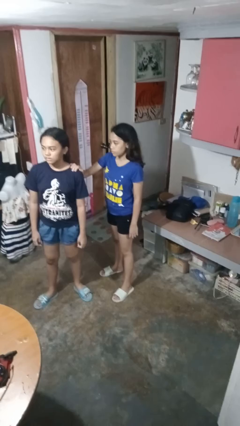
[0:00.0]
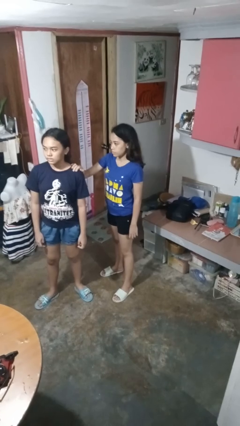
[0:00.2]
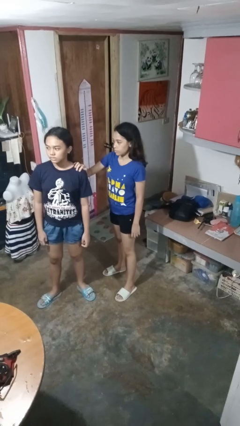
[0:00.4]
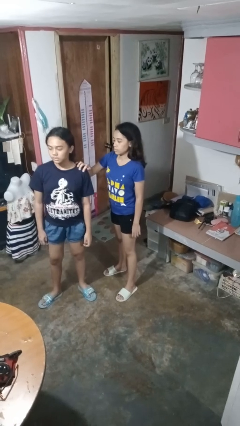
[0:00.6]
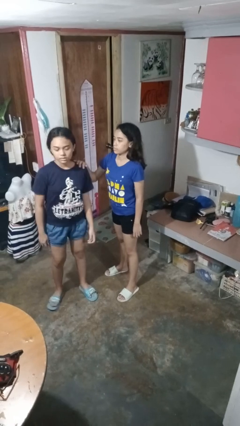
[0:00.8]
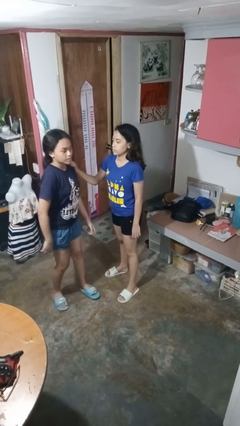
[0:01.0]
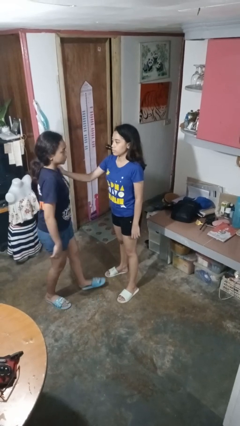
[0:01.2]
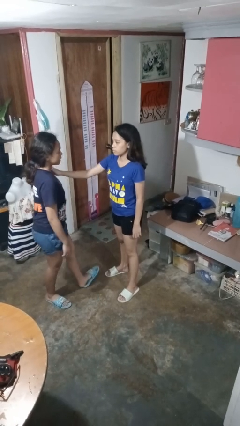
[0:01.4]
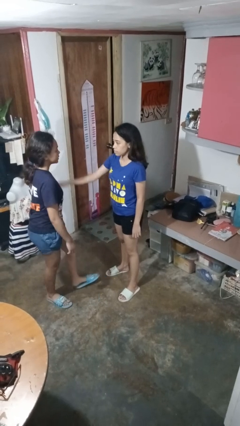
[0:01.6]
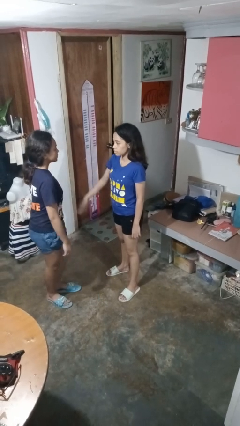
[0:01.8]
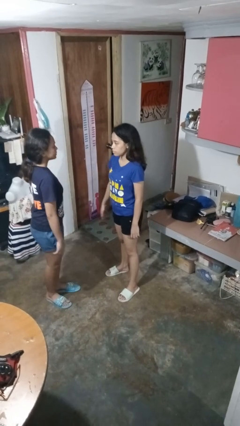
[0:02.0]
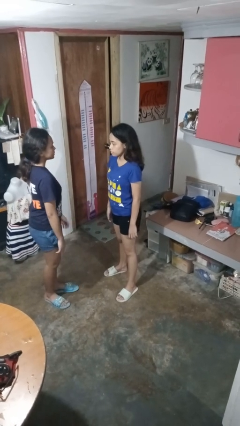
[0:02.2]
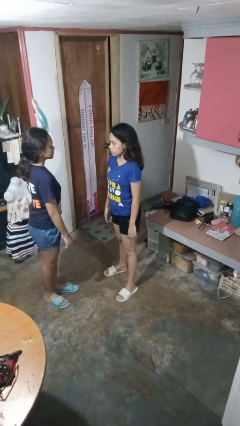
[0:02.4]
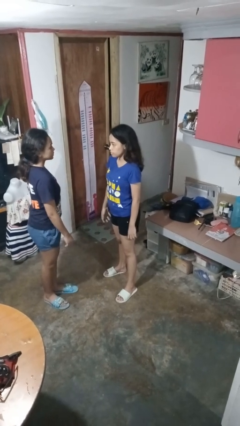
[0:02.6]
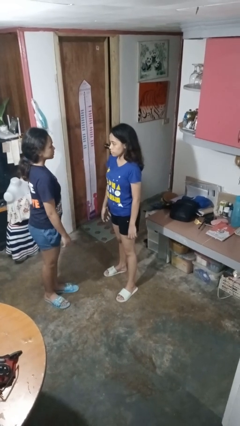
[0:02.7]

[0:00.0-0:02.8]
person spins person around

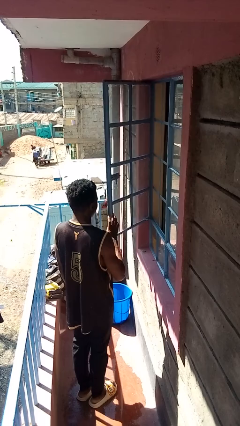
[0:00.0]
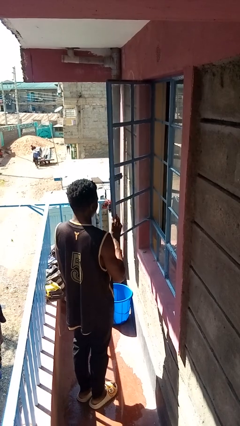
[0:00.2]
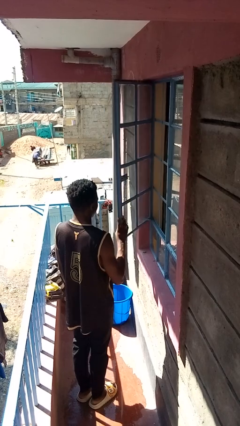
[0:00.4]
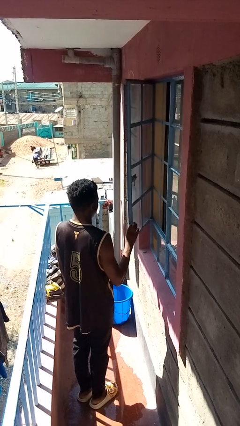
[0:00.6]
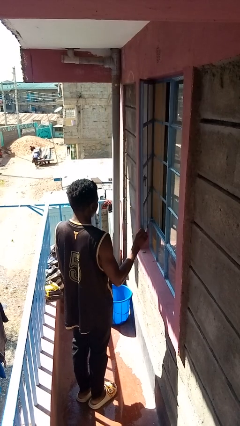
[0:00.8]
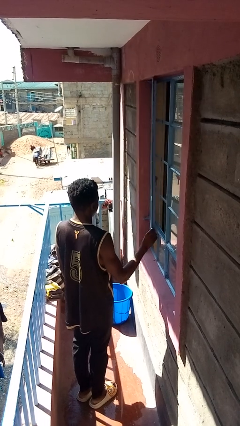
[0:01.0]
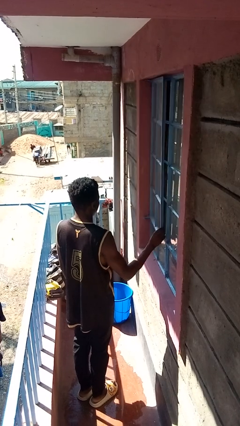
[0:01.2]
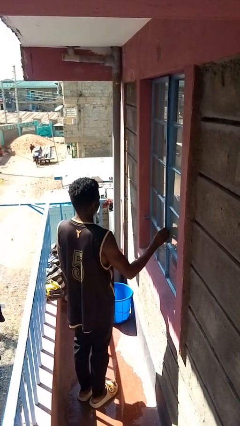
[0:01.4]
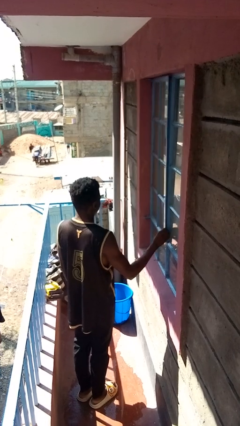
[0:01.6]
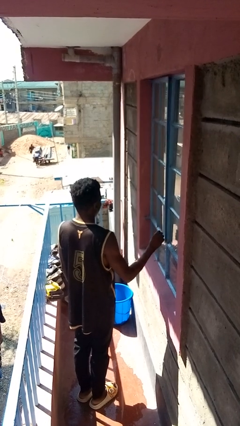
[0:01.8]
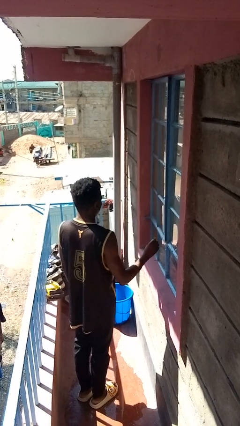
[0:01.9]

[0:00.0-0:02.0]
person closes home window

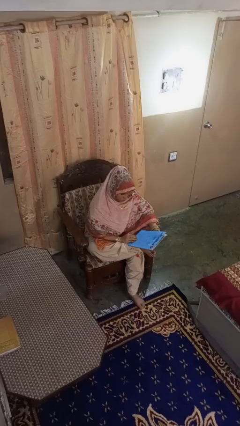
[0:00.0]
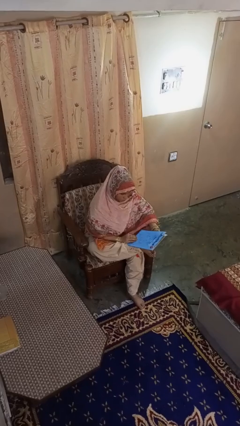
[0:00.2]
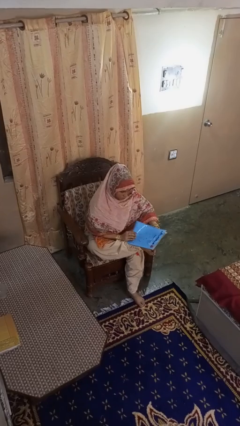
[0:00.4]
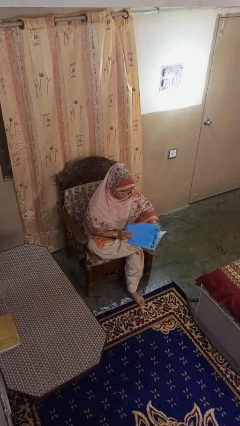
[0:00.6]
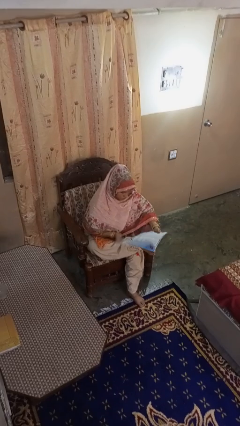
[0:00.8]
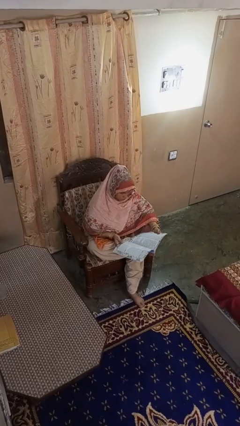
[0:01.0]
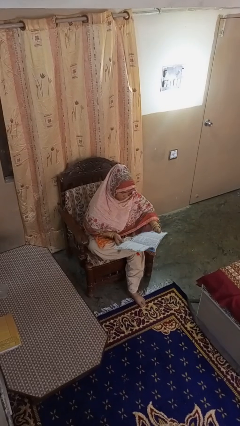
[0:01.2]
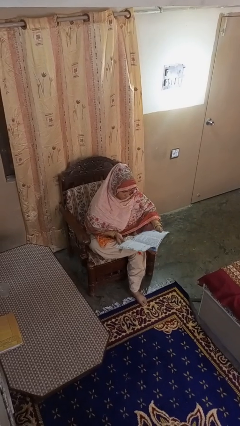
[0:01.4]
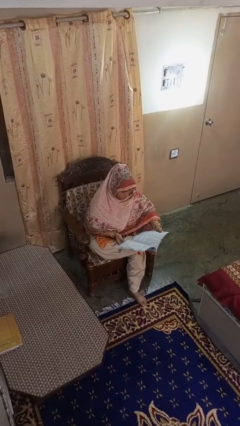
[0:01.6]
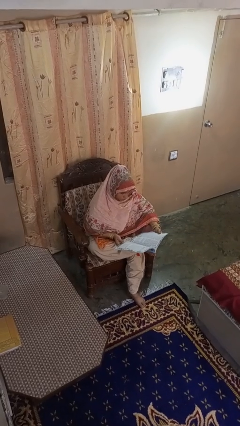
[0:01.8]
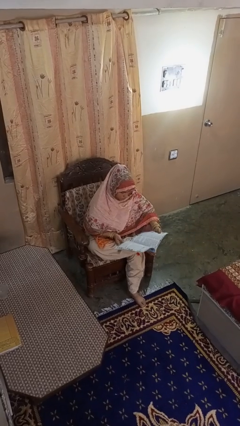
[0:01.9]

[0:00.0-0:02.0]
person reads magazine

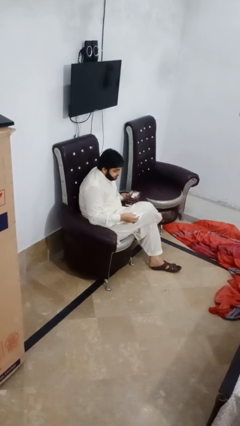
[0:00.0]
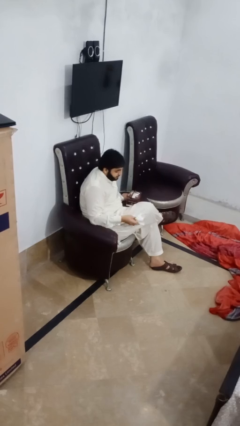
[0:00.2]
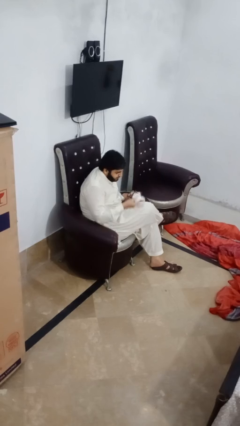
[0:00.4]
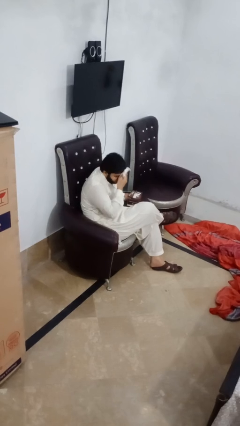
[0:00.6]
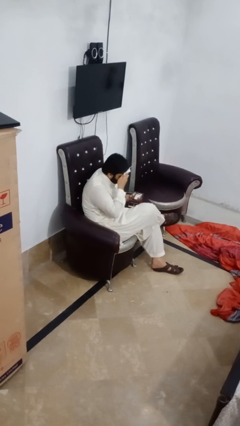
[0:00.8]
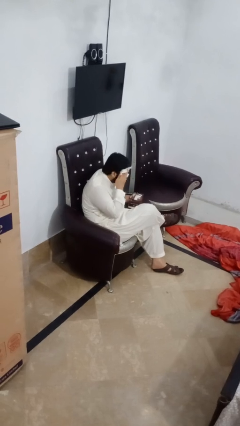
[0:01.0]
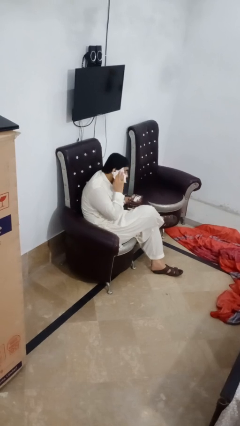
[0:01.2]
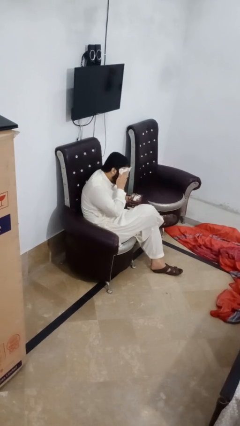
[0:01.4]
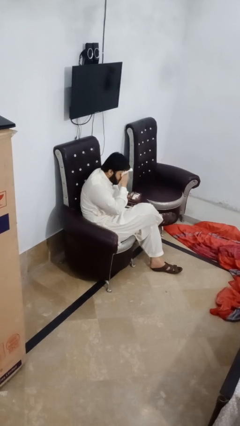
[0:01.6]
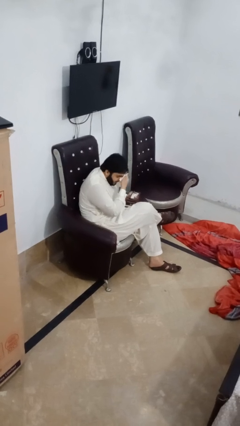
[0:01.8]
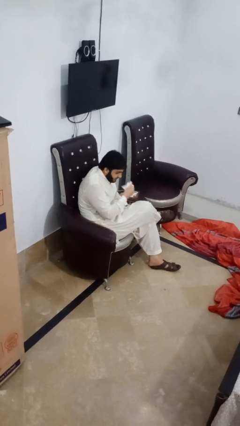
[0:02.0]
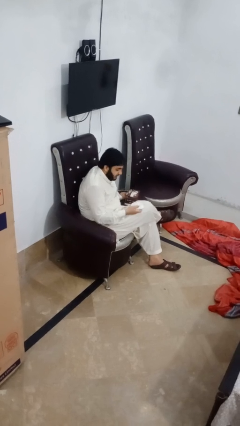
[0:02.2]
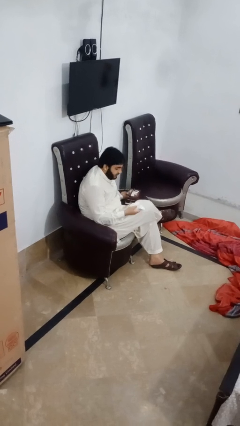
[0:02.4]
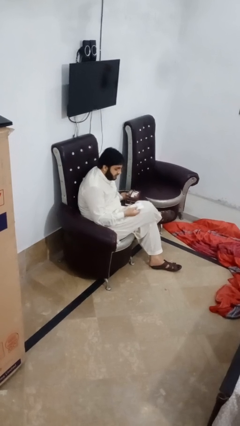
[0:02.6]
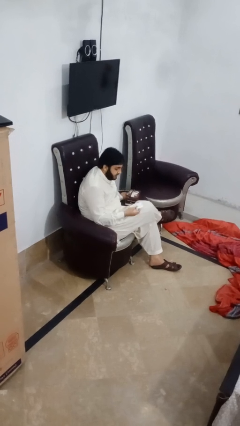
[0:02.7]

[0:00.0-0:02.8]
person wipes mouth with napkin

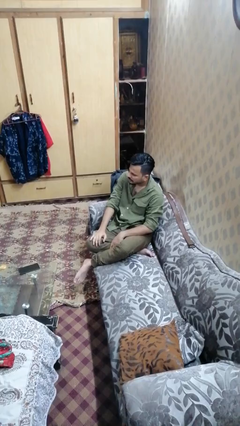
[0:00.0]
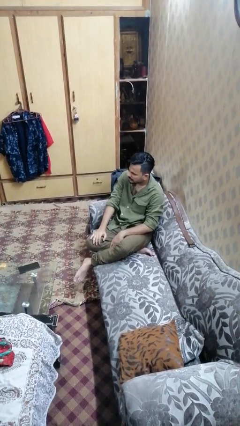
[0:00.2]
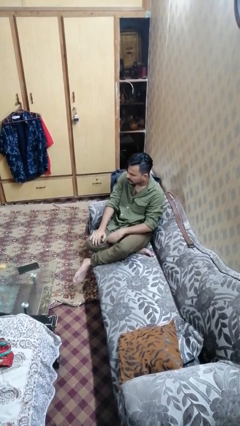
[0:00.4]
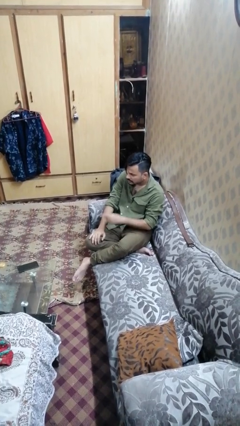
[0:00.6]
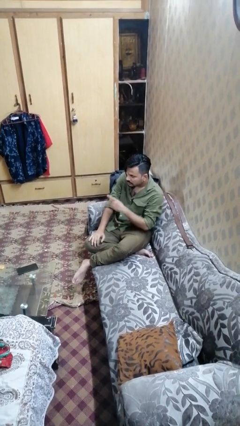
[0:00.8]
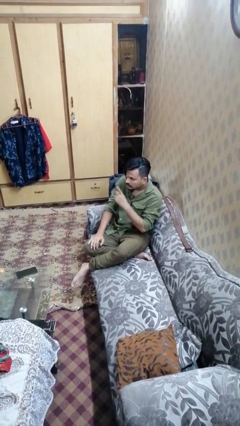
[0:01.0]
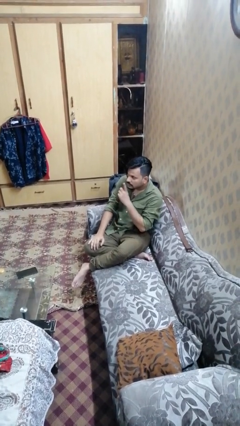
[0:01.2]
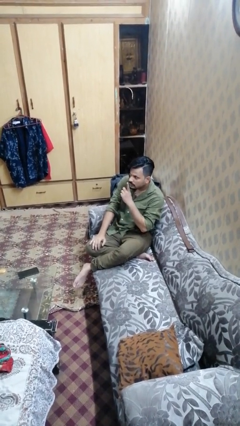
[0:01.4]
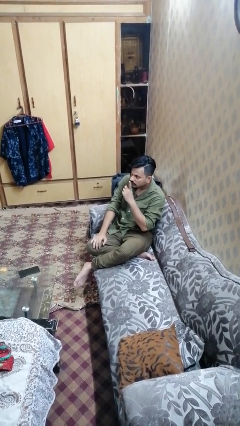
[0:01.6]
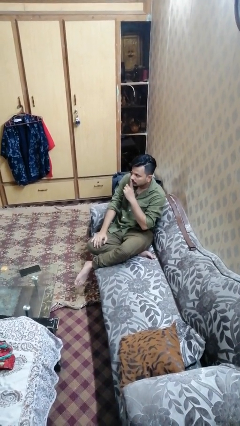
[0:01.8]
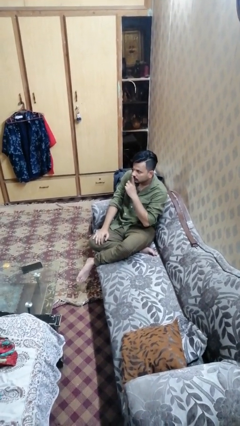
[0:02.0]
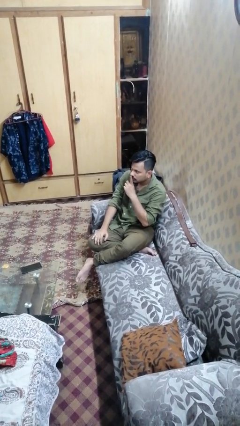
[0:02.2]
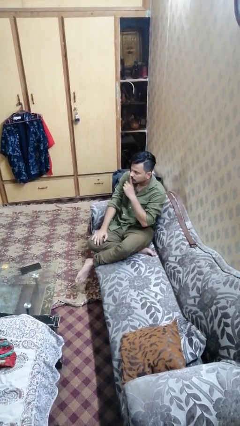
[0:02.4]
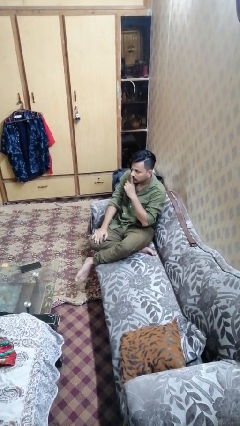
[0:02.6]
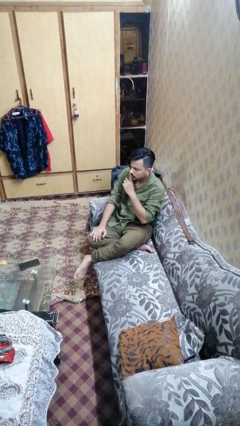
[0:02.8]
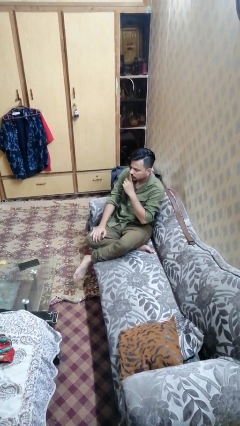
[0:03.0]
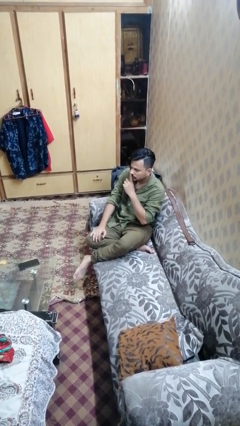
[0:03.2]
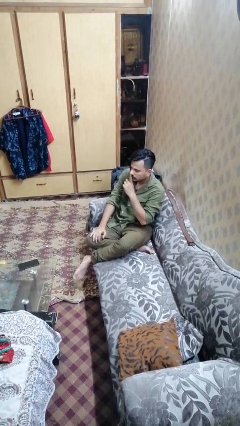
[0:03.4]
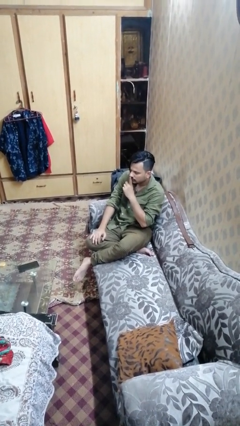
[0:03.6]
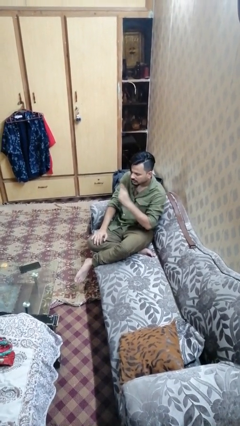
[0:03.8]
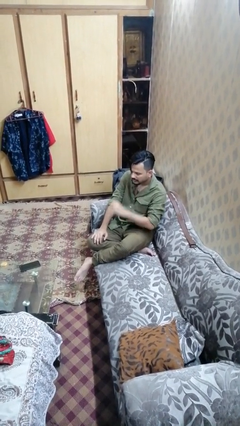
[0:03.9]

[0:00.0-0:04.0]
person gestures be quiet

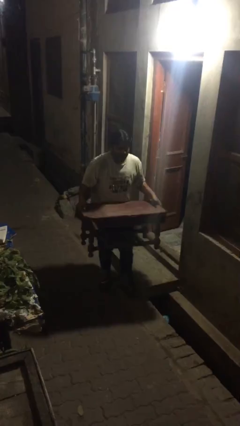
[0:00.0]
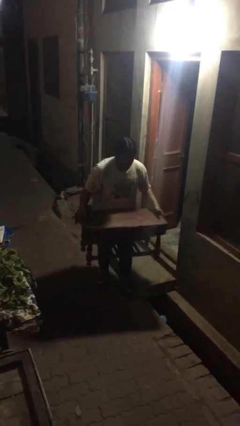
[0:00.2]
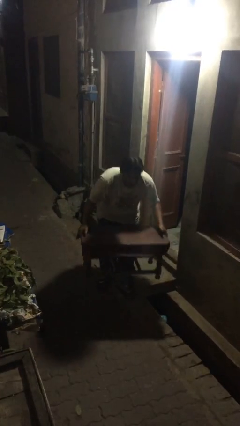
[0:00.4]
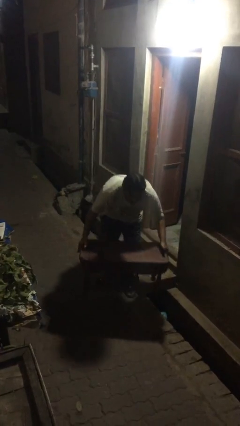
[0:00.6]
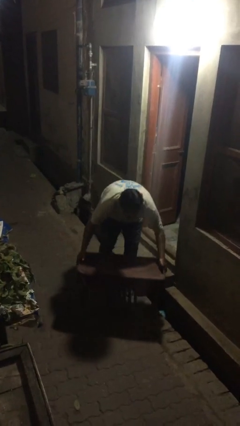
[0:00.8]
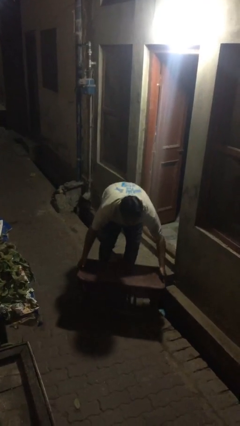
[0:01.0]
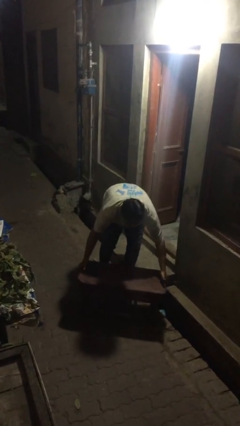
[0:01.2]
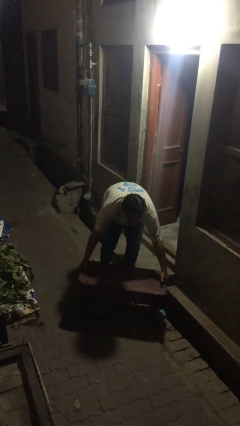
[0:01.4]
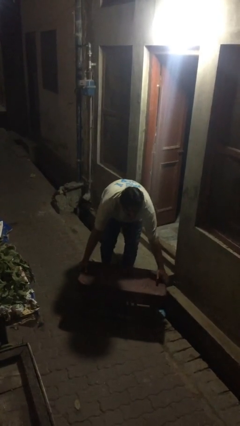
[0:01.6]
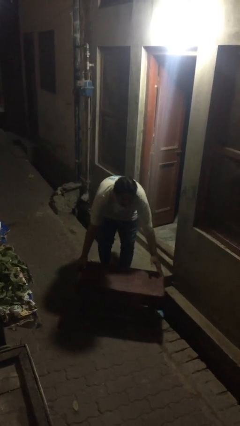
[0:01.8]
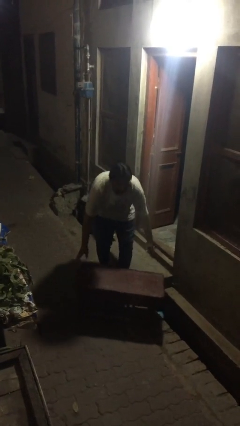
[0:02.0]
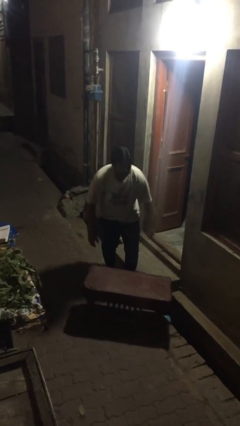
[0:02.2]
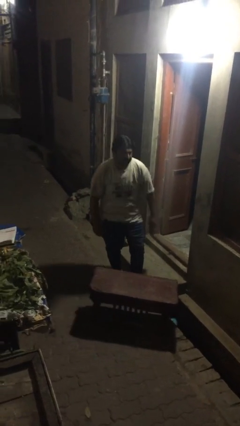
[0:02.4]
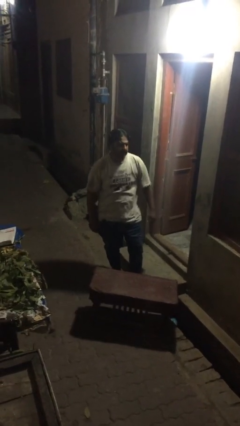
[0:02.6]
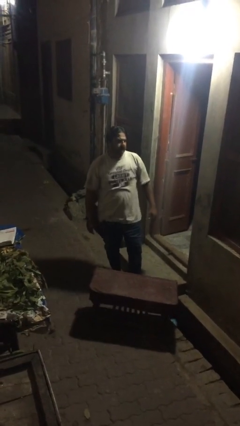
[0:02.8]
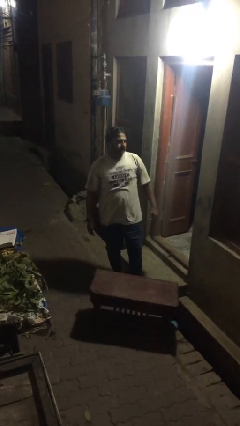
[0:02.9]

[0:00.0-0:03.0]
person puts down object on floor

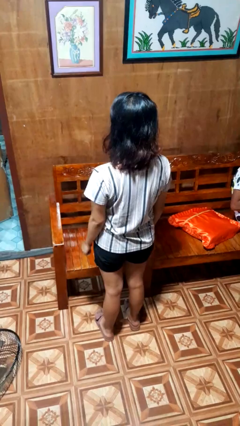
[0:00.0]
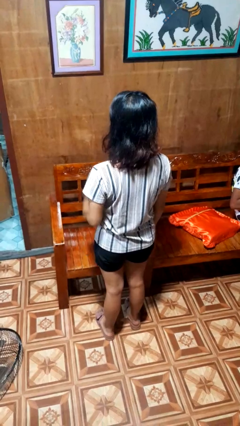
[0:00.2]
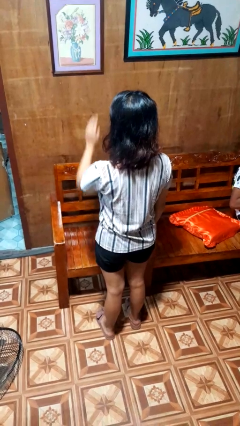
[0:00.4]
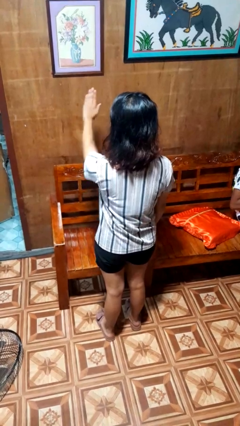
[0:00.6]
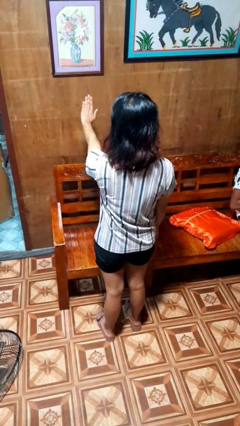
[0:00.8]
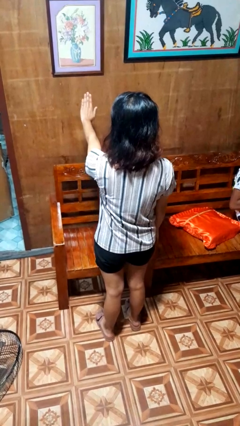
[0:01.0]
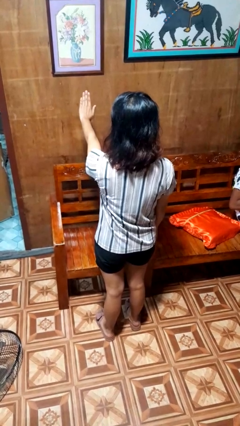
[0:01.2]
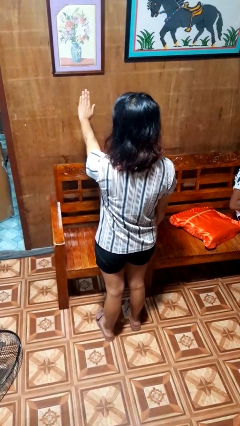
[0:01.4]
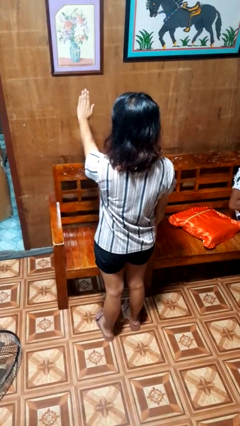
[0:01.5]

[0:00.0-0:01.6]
person gestures stop
